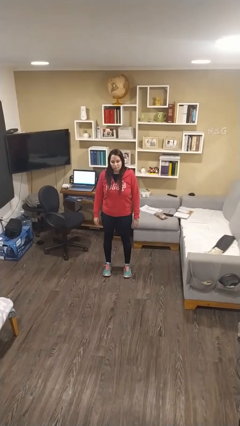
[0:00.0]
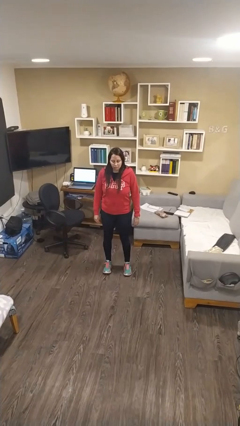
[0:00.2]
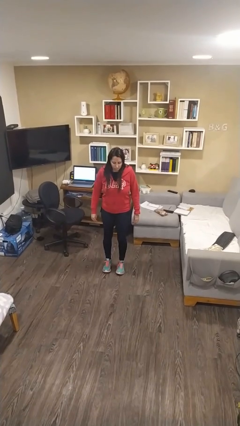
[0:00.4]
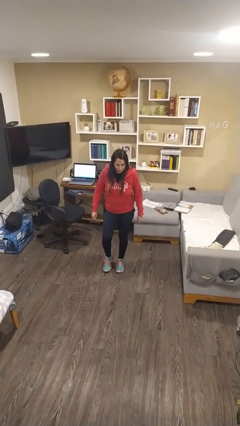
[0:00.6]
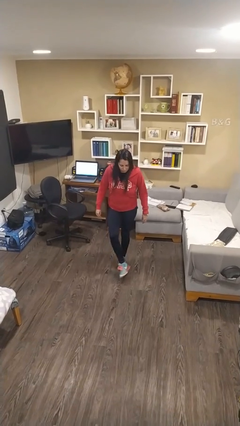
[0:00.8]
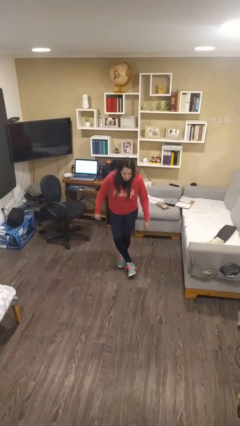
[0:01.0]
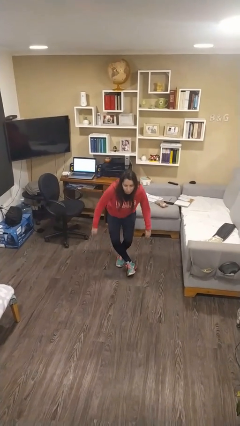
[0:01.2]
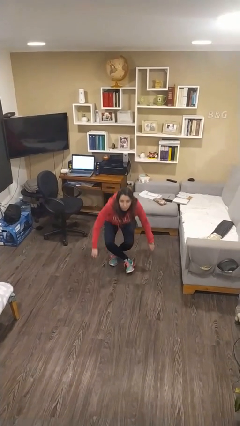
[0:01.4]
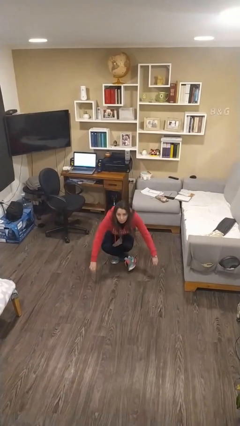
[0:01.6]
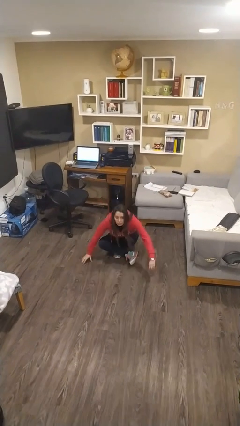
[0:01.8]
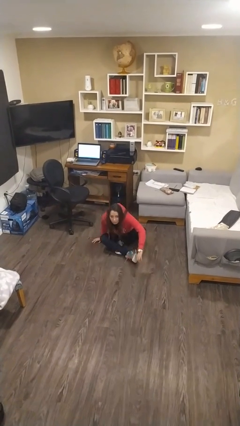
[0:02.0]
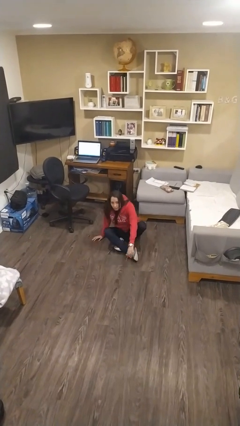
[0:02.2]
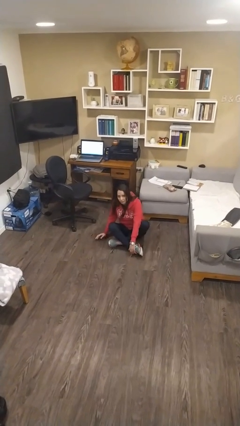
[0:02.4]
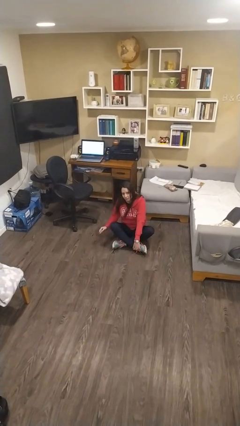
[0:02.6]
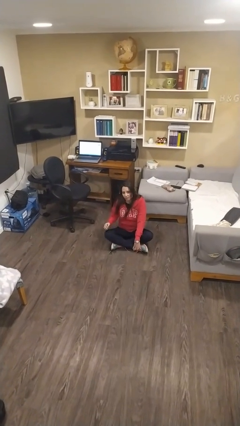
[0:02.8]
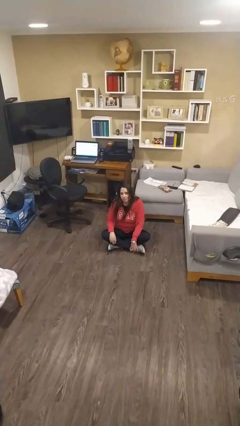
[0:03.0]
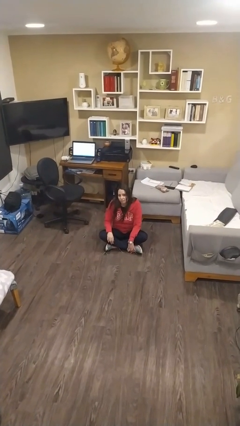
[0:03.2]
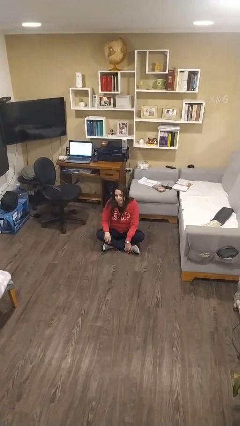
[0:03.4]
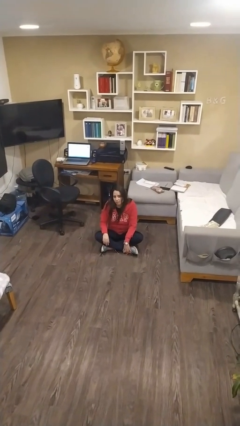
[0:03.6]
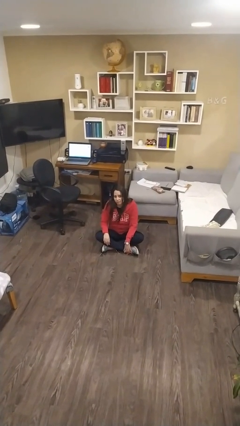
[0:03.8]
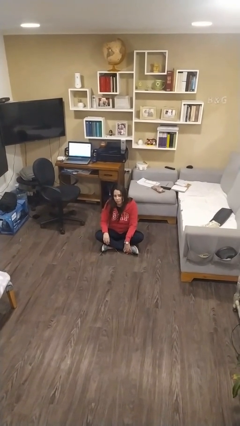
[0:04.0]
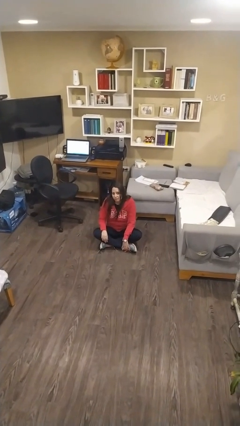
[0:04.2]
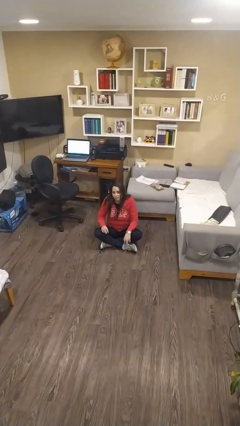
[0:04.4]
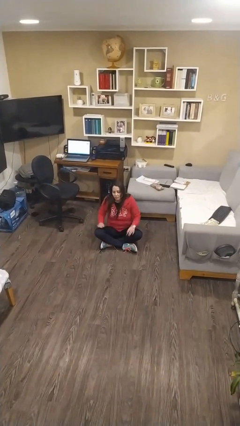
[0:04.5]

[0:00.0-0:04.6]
person sits crisscross

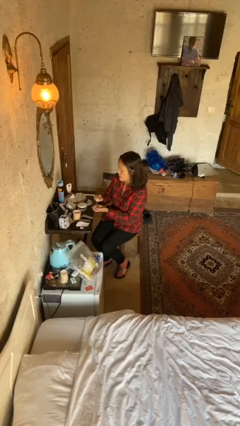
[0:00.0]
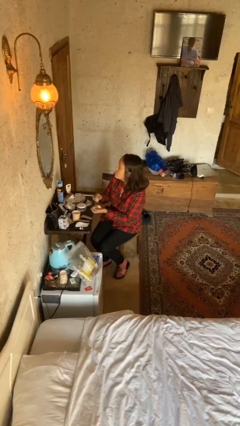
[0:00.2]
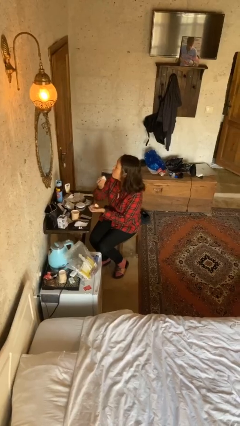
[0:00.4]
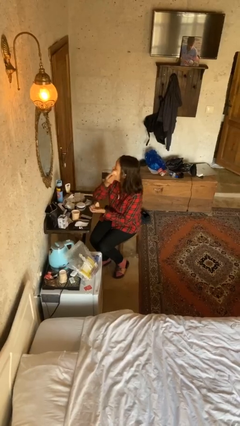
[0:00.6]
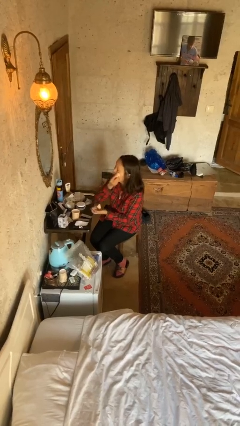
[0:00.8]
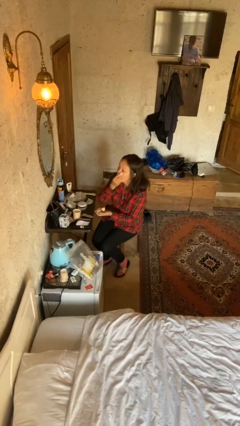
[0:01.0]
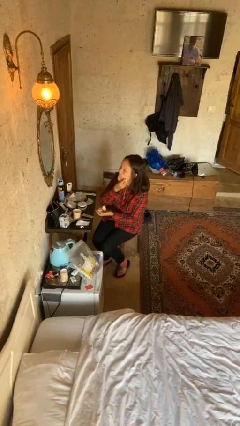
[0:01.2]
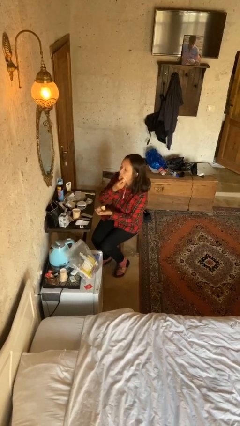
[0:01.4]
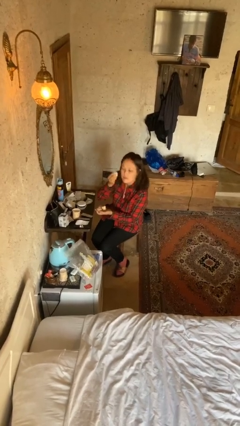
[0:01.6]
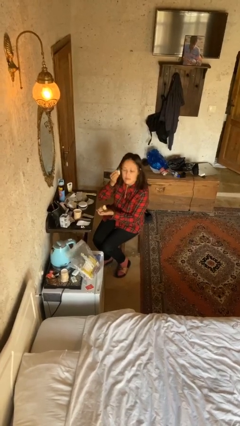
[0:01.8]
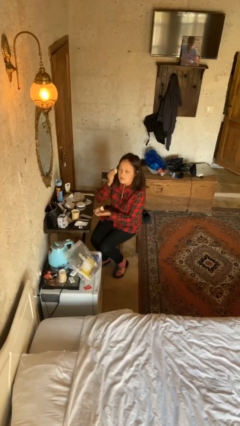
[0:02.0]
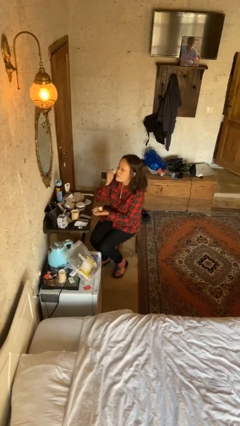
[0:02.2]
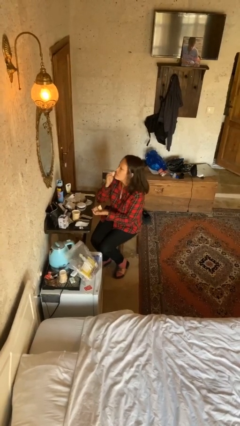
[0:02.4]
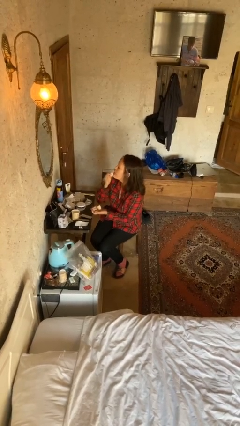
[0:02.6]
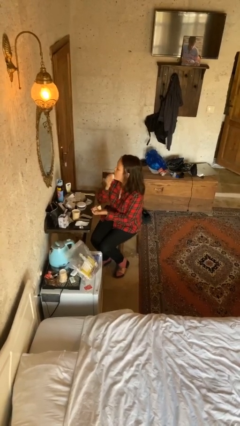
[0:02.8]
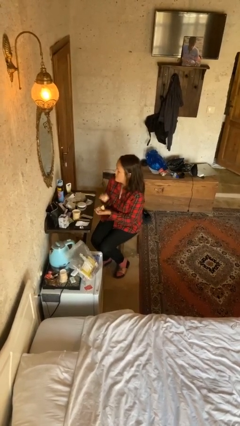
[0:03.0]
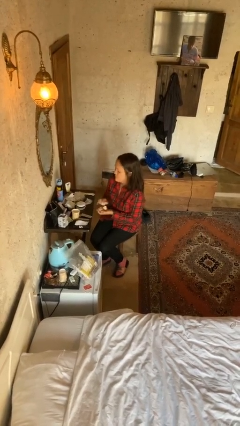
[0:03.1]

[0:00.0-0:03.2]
person applies foundation makeup

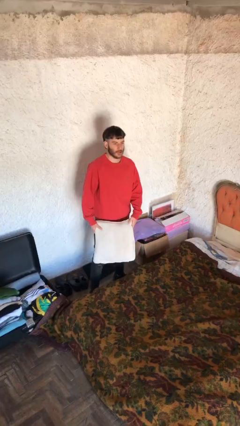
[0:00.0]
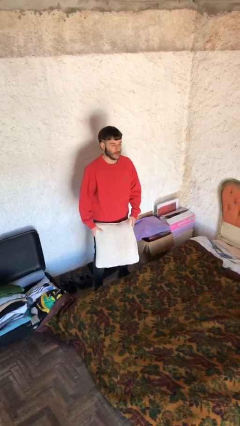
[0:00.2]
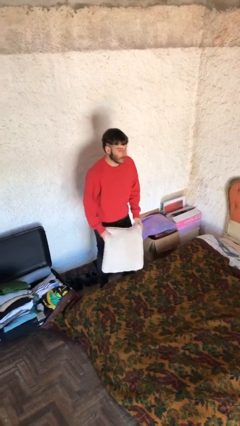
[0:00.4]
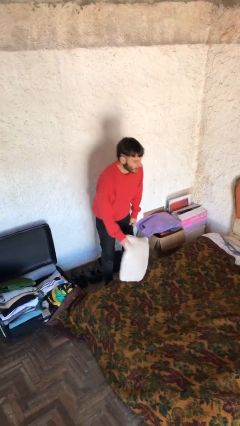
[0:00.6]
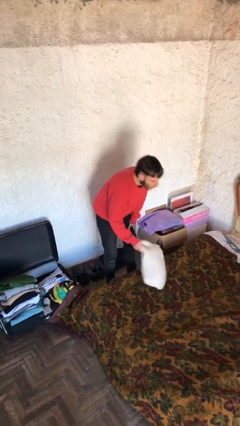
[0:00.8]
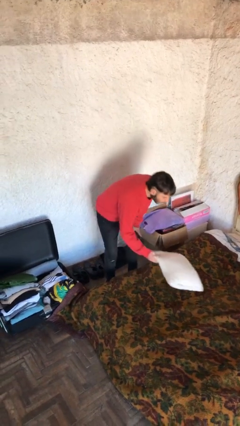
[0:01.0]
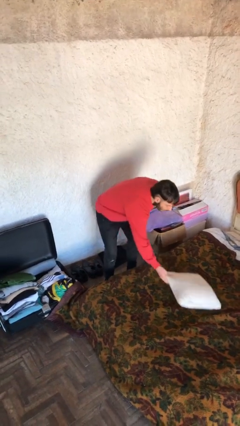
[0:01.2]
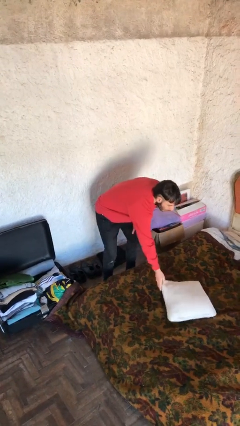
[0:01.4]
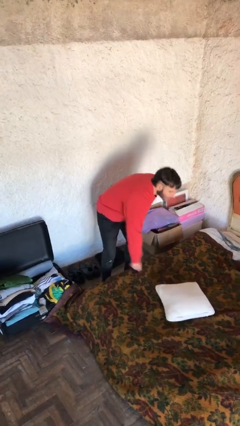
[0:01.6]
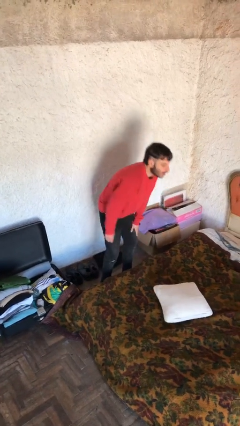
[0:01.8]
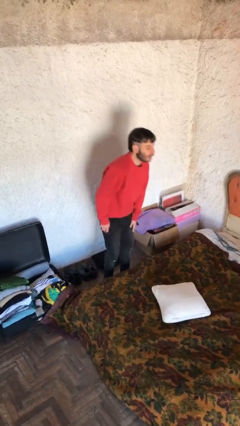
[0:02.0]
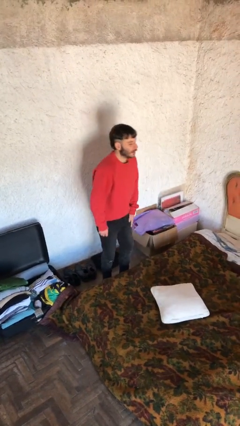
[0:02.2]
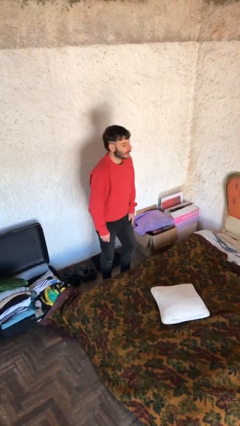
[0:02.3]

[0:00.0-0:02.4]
person puts down object on bed

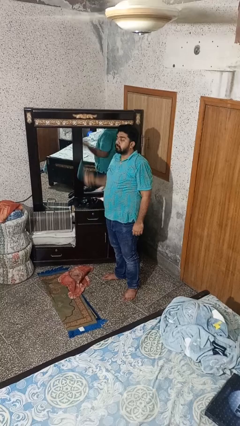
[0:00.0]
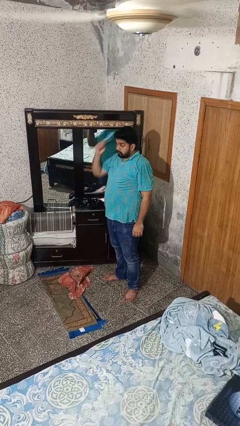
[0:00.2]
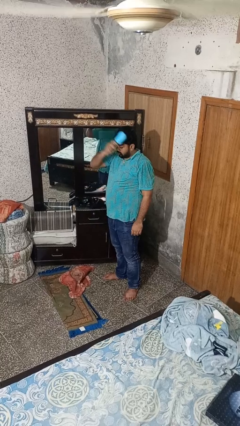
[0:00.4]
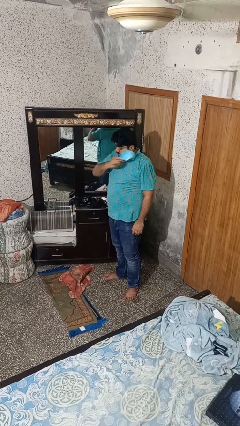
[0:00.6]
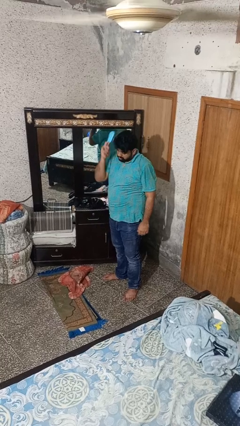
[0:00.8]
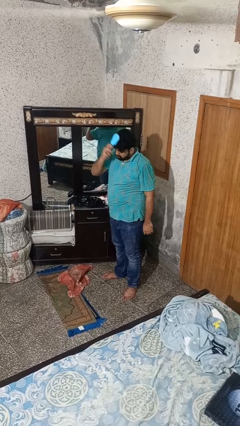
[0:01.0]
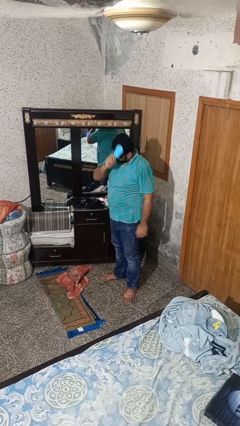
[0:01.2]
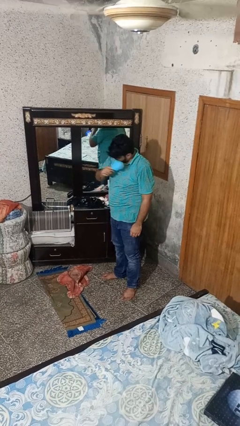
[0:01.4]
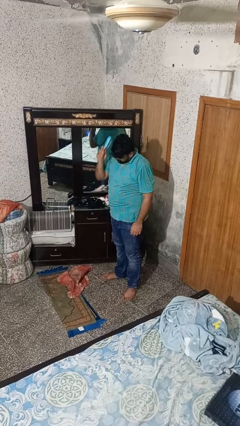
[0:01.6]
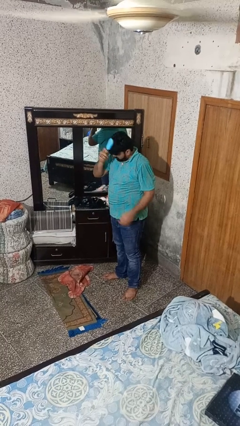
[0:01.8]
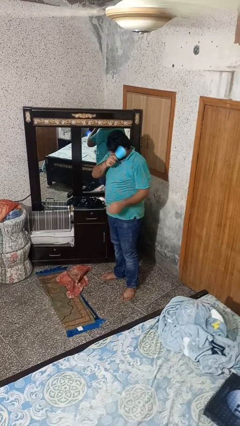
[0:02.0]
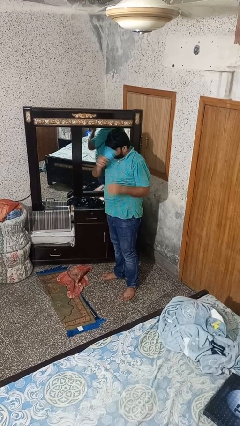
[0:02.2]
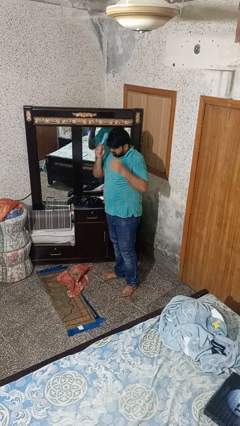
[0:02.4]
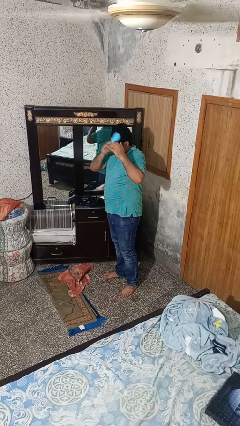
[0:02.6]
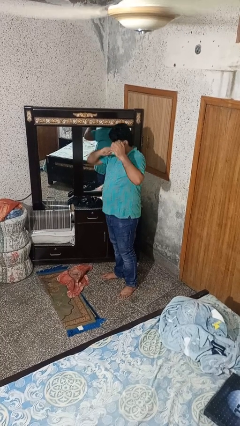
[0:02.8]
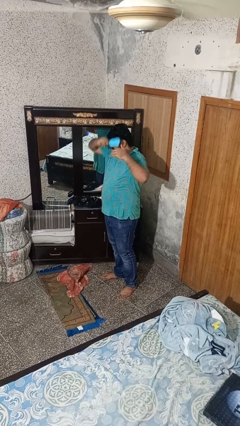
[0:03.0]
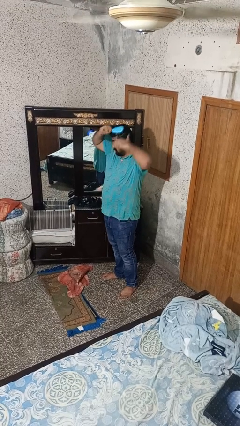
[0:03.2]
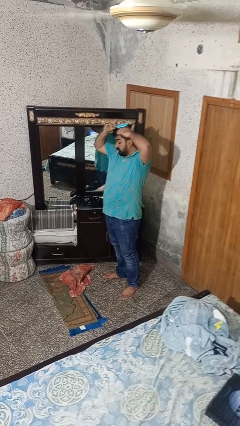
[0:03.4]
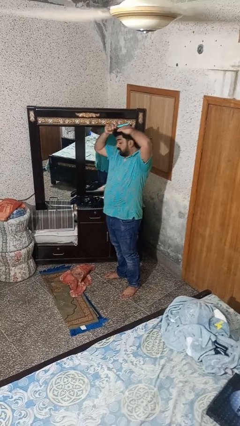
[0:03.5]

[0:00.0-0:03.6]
person brushes hair

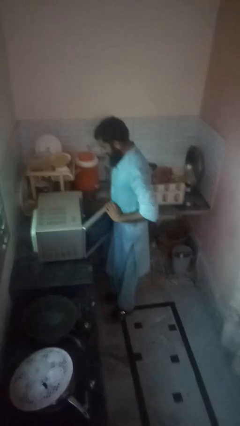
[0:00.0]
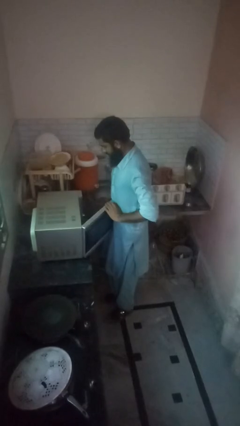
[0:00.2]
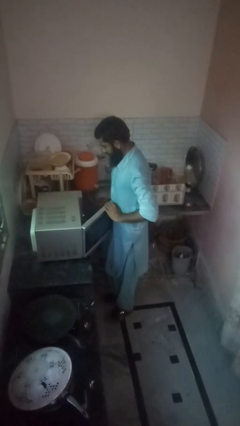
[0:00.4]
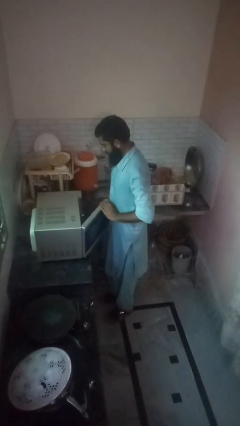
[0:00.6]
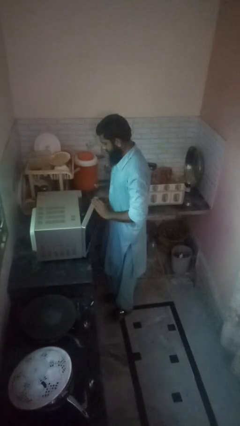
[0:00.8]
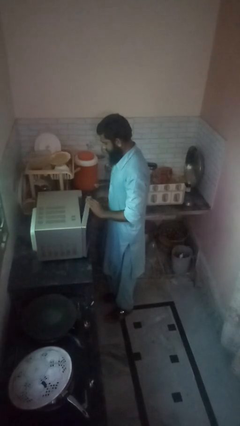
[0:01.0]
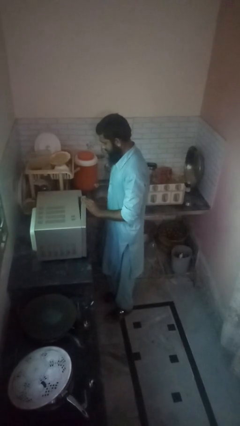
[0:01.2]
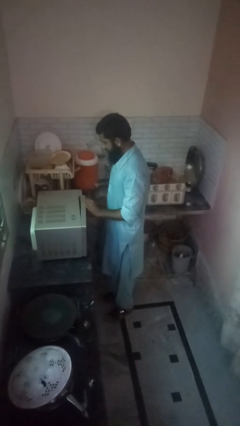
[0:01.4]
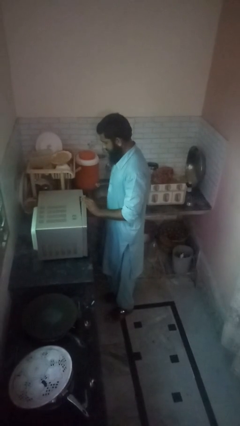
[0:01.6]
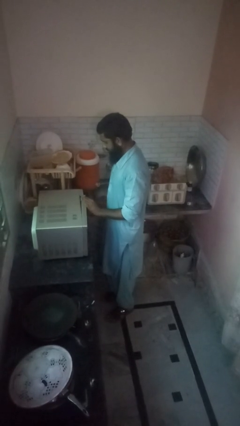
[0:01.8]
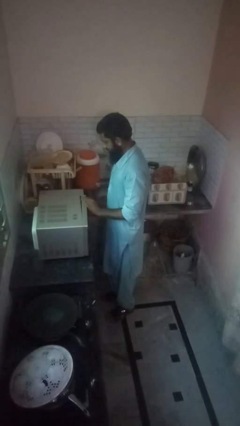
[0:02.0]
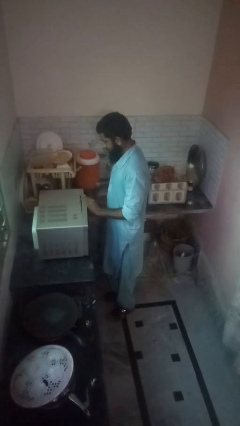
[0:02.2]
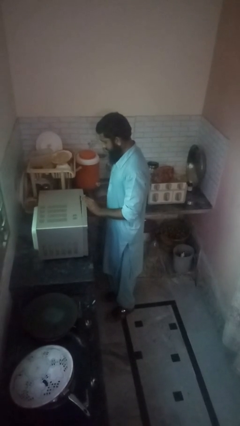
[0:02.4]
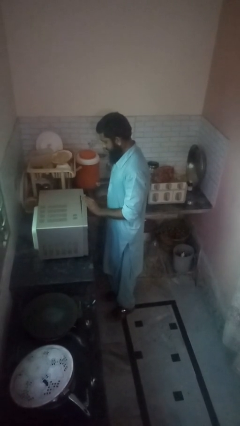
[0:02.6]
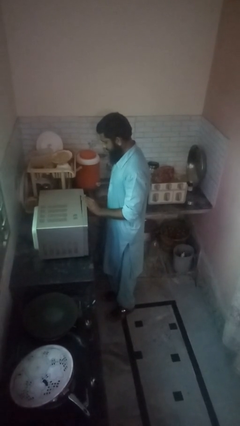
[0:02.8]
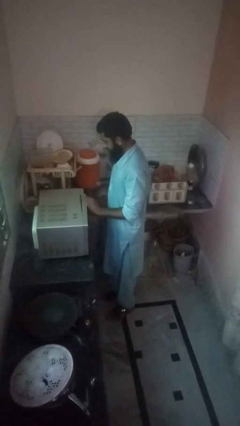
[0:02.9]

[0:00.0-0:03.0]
person closes oven door

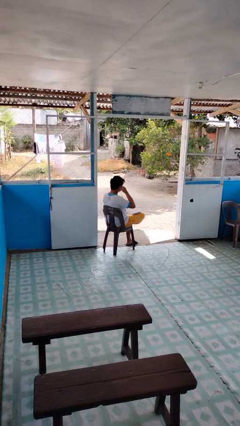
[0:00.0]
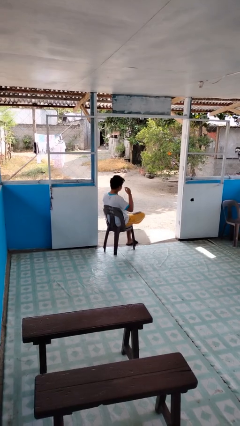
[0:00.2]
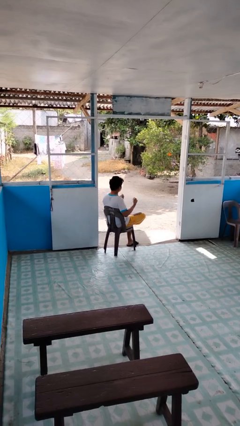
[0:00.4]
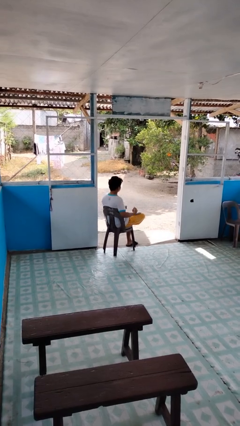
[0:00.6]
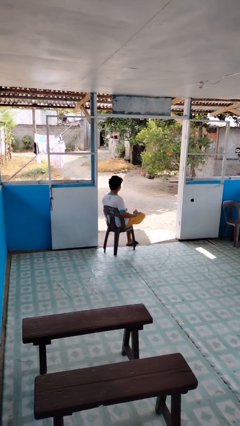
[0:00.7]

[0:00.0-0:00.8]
person takes off headphones
